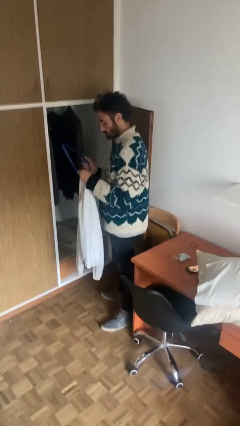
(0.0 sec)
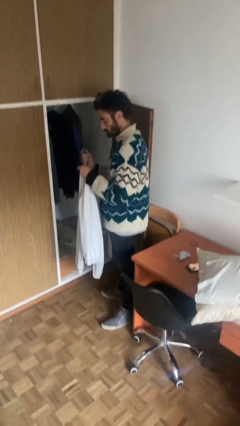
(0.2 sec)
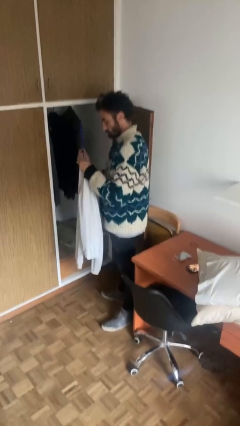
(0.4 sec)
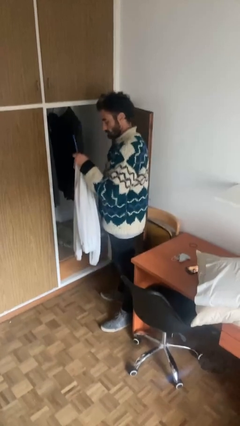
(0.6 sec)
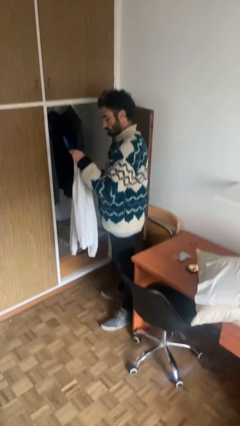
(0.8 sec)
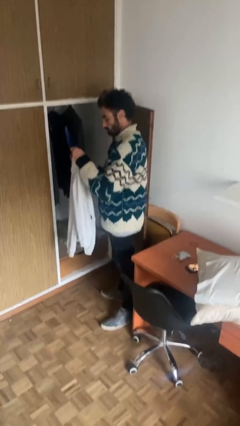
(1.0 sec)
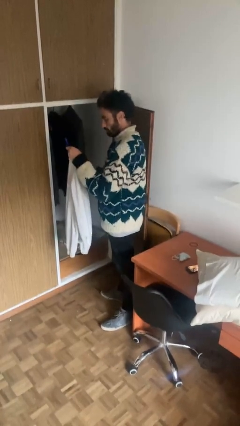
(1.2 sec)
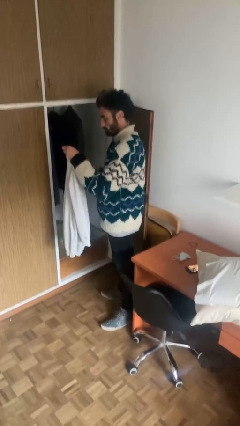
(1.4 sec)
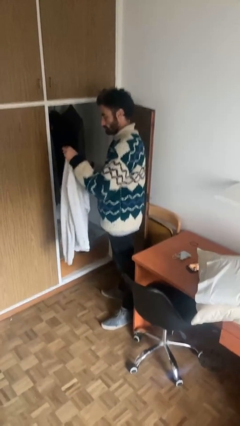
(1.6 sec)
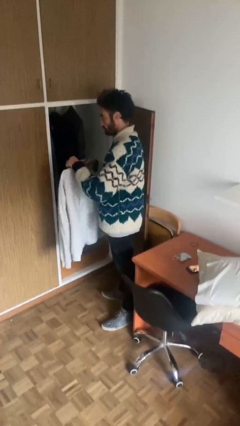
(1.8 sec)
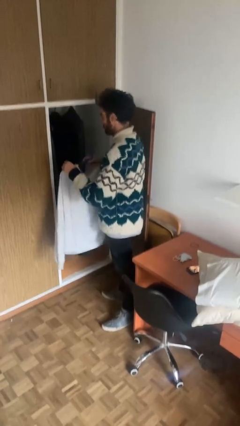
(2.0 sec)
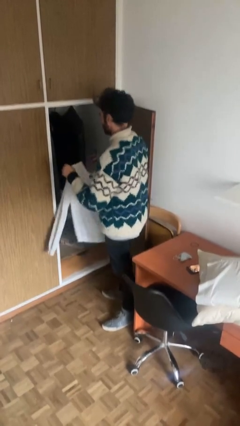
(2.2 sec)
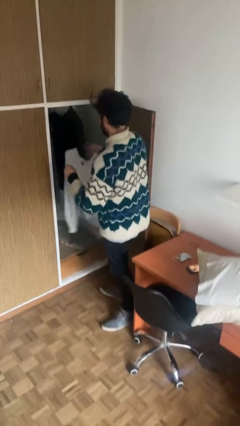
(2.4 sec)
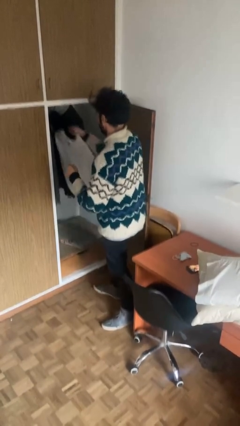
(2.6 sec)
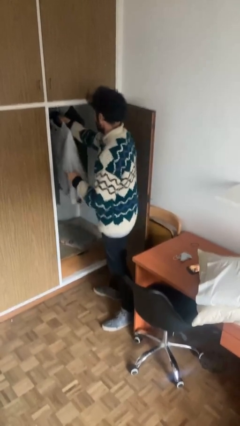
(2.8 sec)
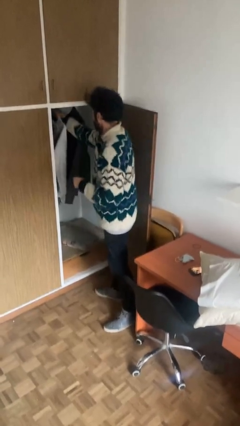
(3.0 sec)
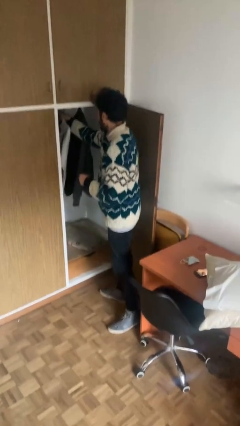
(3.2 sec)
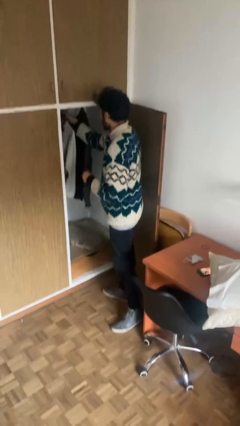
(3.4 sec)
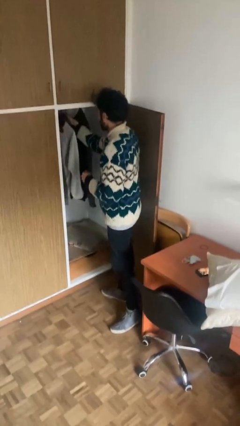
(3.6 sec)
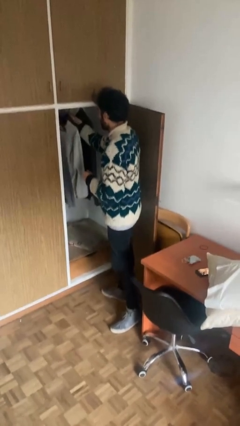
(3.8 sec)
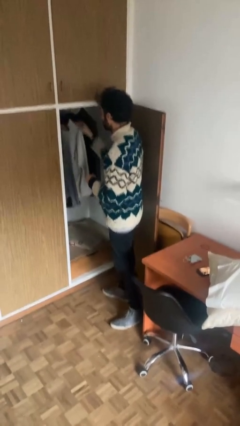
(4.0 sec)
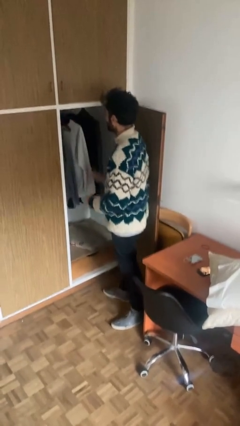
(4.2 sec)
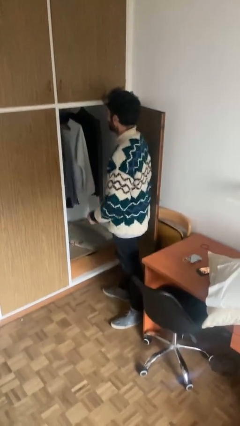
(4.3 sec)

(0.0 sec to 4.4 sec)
person puts clothes into closet

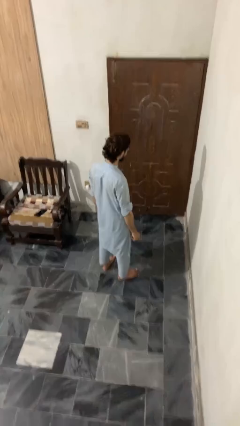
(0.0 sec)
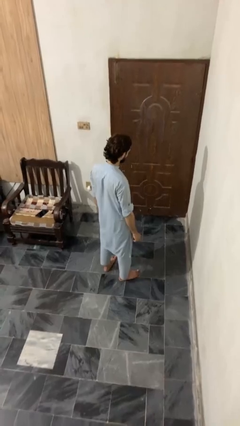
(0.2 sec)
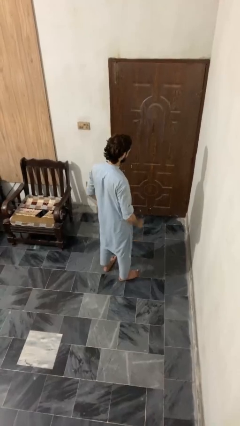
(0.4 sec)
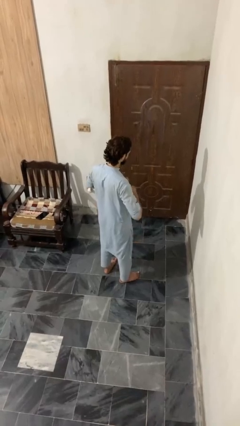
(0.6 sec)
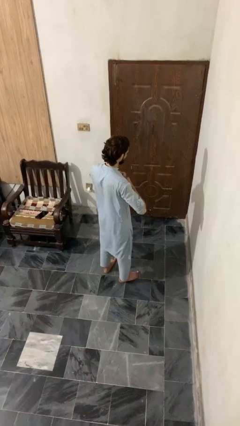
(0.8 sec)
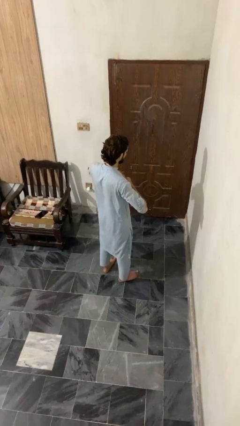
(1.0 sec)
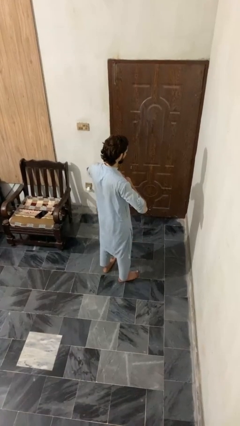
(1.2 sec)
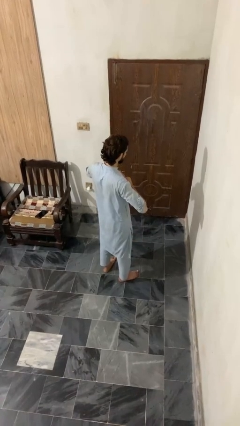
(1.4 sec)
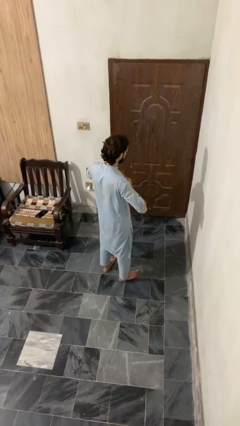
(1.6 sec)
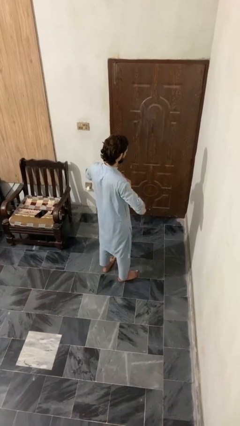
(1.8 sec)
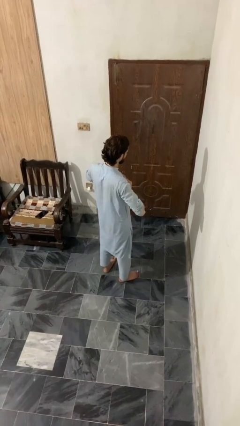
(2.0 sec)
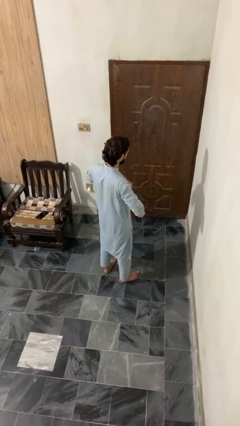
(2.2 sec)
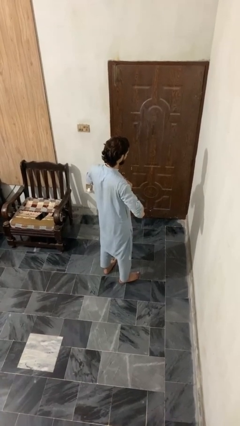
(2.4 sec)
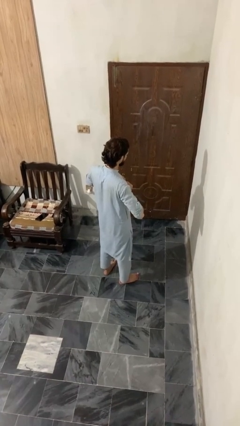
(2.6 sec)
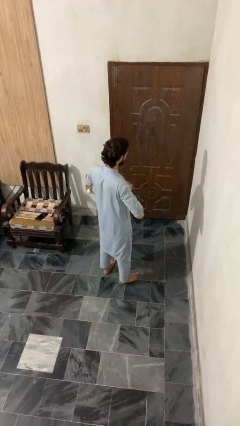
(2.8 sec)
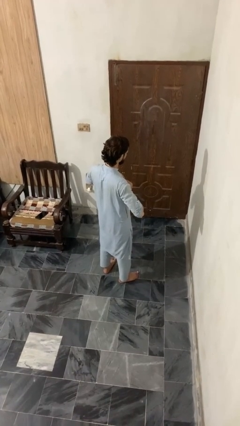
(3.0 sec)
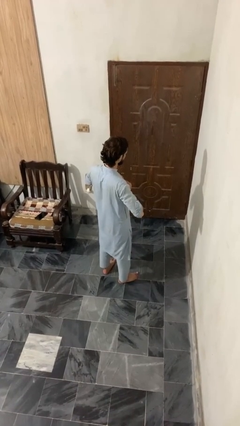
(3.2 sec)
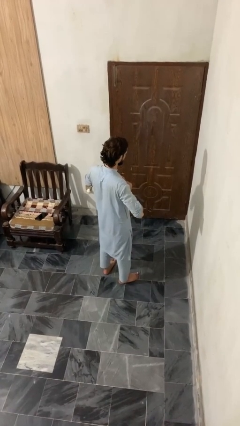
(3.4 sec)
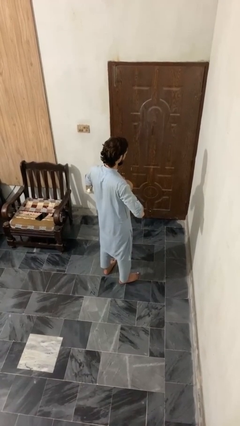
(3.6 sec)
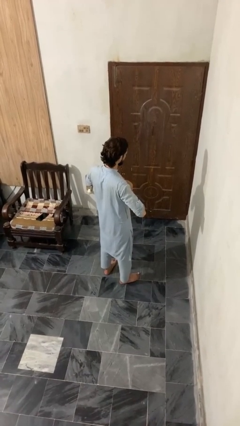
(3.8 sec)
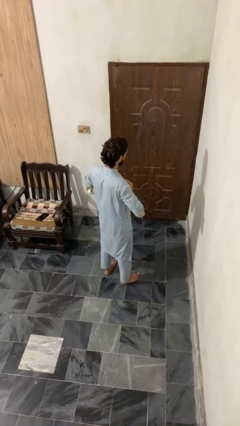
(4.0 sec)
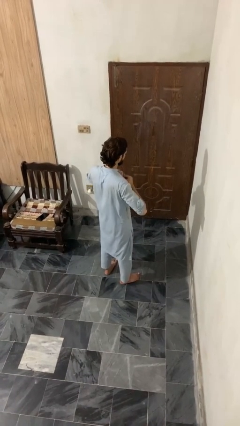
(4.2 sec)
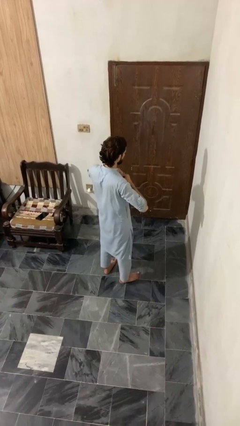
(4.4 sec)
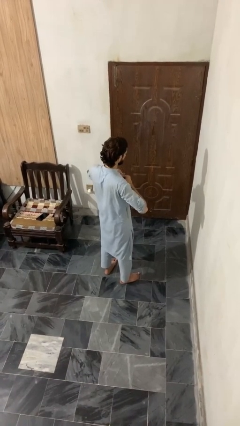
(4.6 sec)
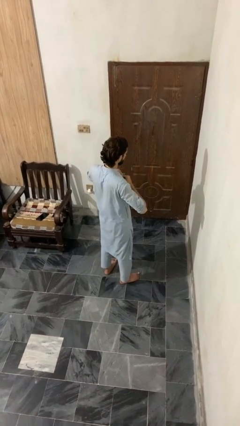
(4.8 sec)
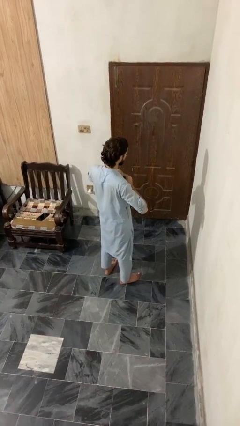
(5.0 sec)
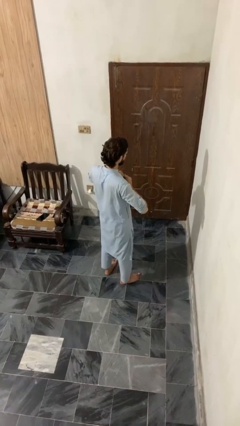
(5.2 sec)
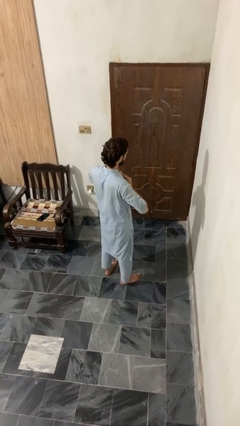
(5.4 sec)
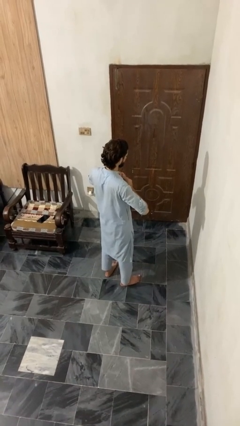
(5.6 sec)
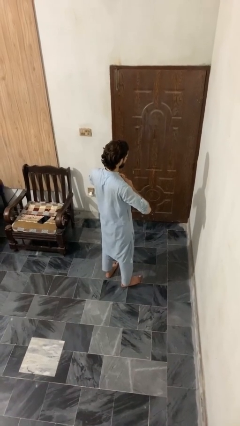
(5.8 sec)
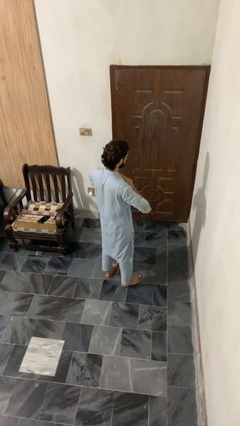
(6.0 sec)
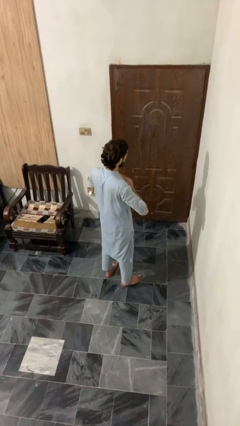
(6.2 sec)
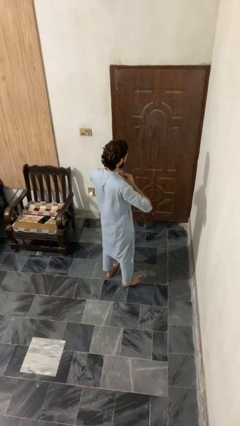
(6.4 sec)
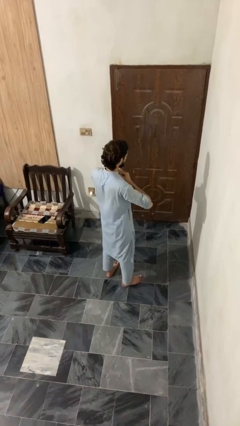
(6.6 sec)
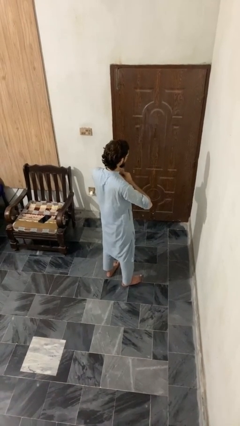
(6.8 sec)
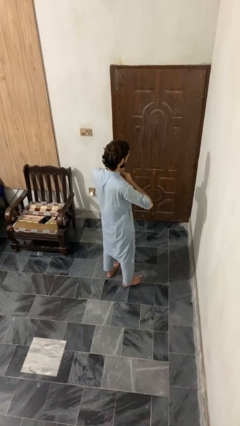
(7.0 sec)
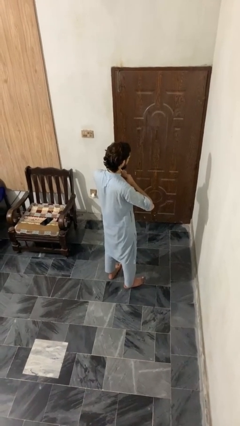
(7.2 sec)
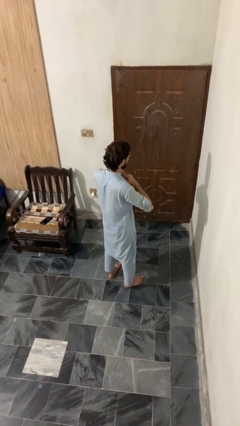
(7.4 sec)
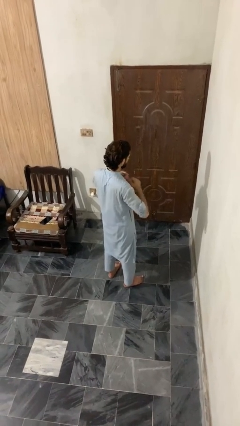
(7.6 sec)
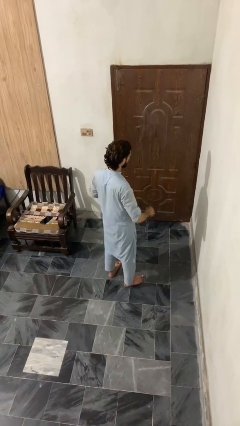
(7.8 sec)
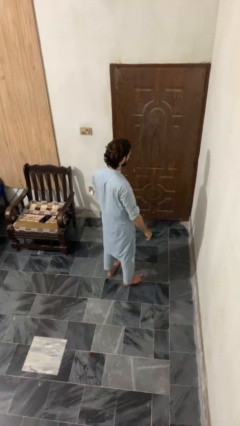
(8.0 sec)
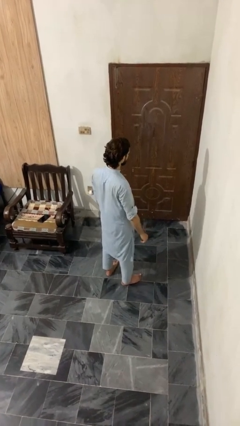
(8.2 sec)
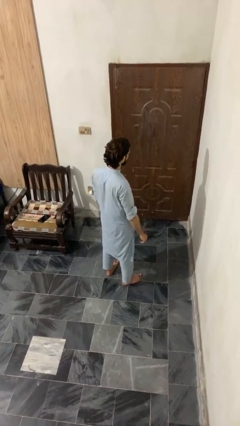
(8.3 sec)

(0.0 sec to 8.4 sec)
person buttons shirt

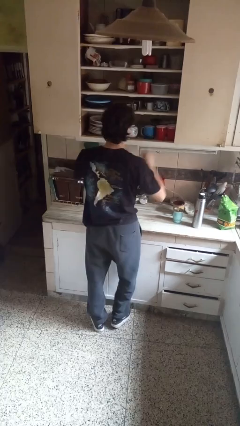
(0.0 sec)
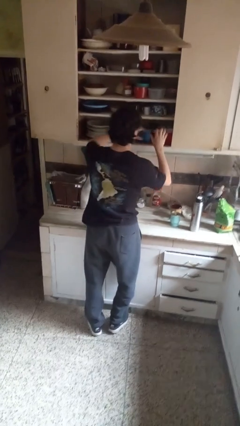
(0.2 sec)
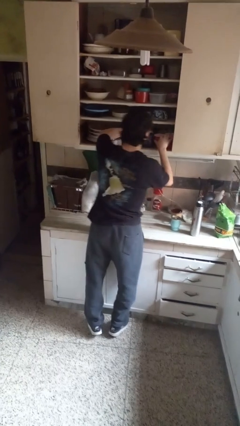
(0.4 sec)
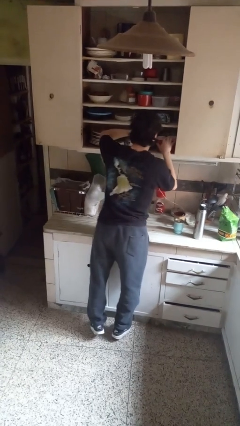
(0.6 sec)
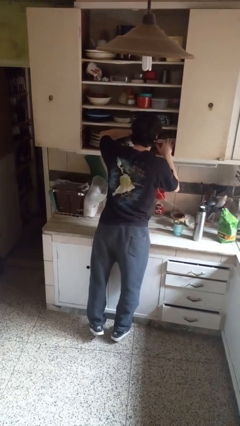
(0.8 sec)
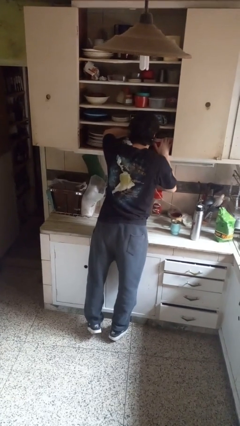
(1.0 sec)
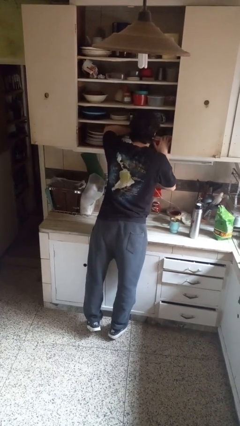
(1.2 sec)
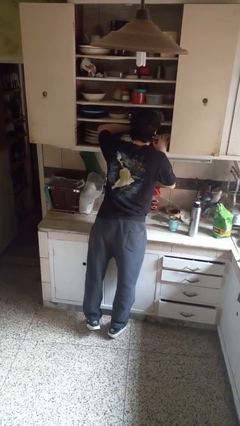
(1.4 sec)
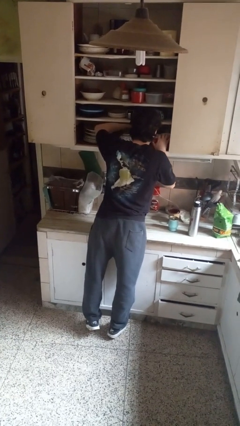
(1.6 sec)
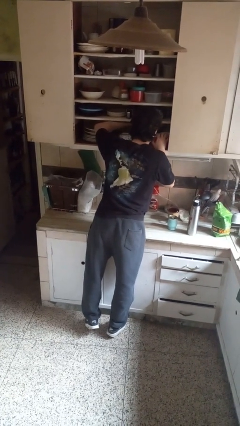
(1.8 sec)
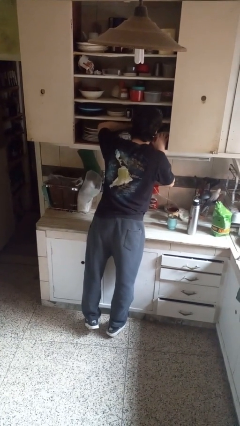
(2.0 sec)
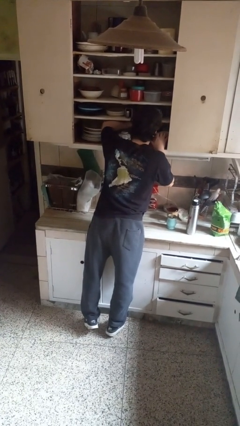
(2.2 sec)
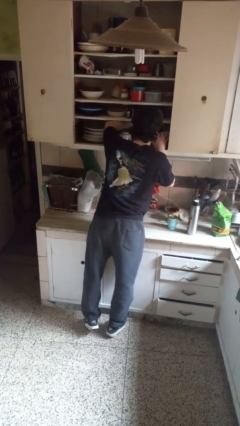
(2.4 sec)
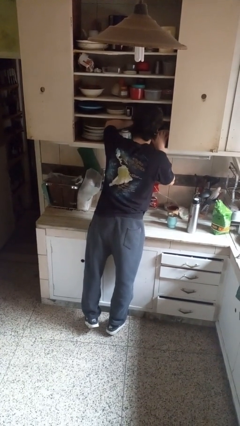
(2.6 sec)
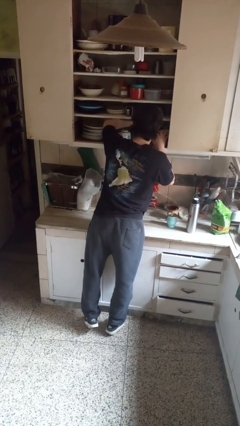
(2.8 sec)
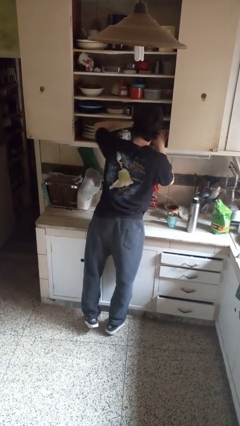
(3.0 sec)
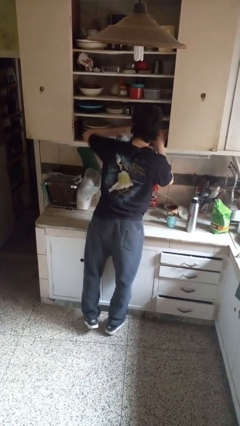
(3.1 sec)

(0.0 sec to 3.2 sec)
person searches in cabinet

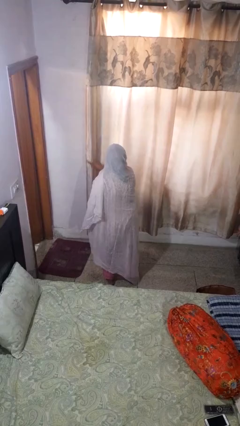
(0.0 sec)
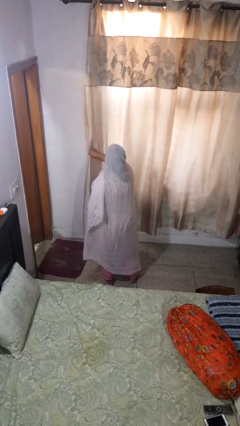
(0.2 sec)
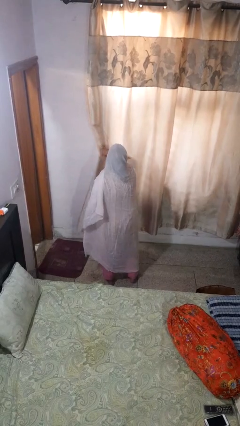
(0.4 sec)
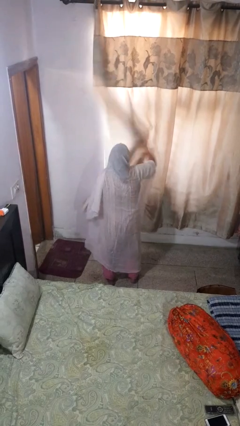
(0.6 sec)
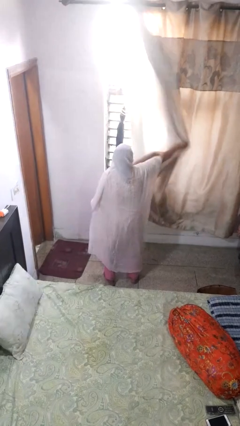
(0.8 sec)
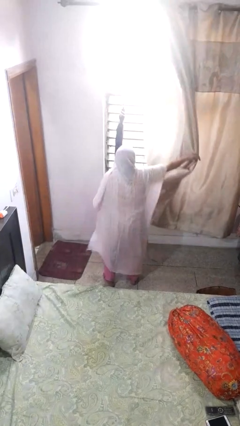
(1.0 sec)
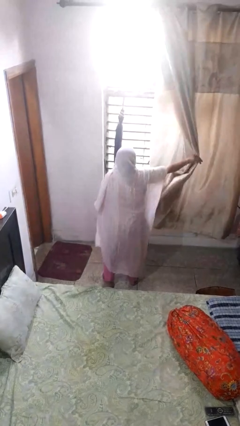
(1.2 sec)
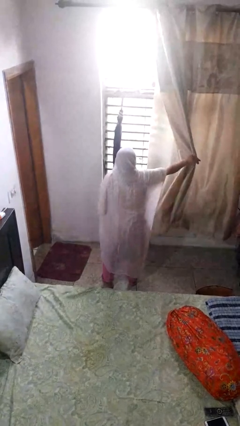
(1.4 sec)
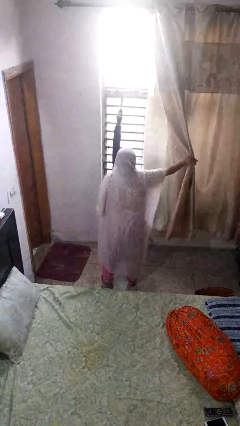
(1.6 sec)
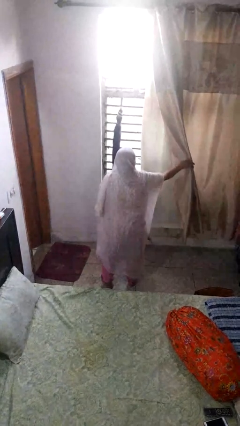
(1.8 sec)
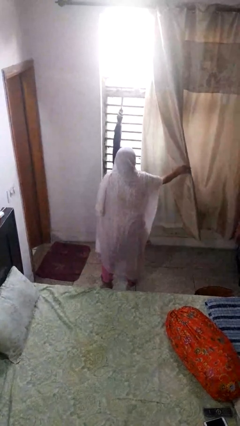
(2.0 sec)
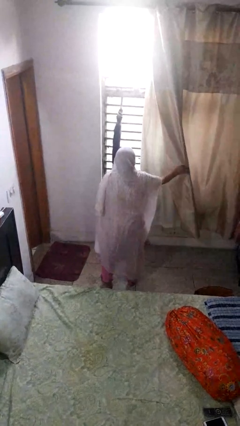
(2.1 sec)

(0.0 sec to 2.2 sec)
person opens curtains
